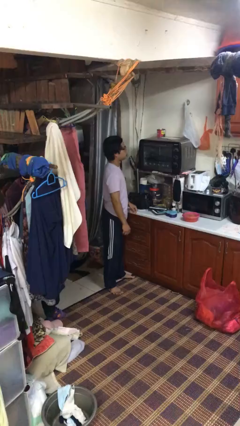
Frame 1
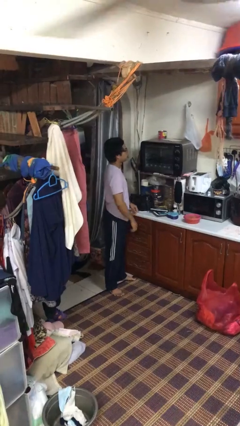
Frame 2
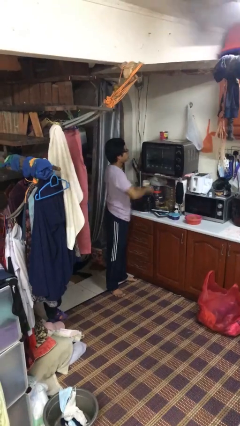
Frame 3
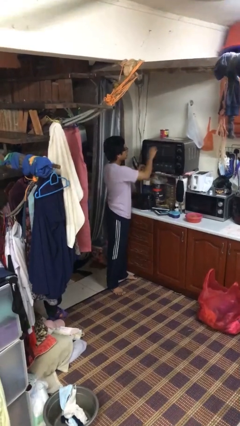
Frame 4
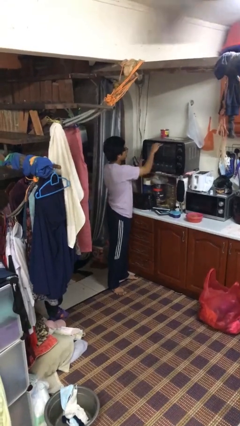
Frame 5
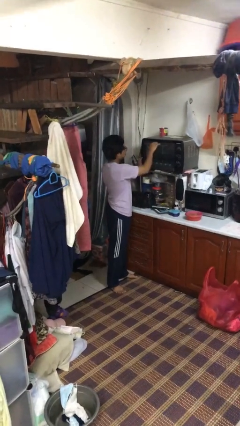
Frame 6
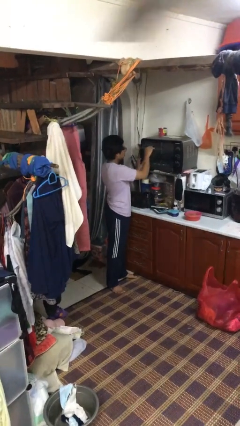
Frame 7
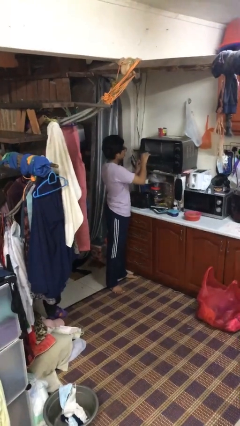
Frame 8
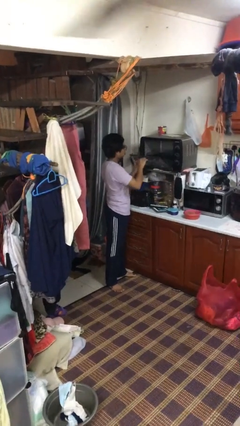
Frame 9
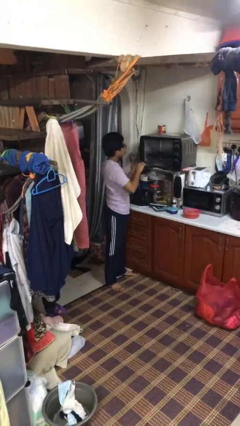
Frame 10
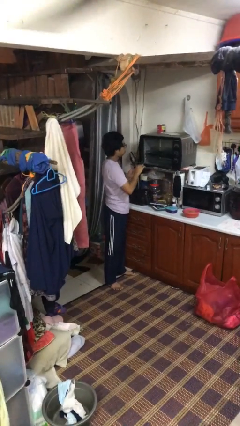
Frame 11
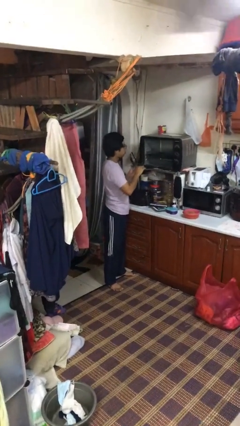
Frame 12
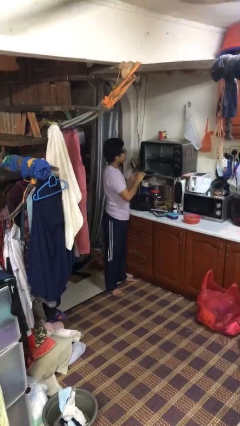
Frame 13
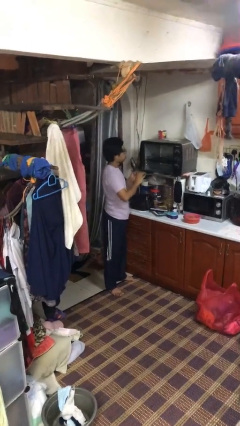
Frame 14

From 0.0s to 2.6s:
person opens oven door

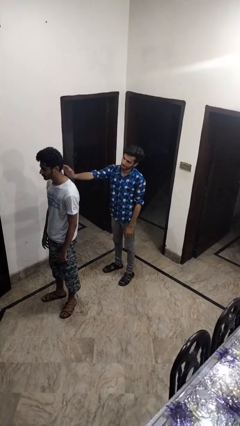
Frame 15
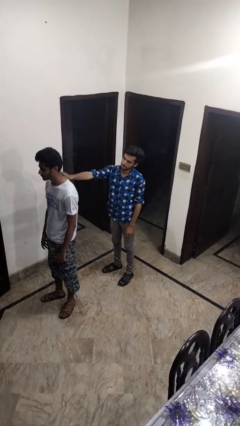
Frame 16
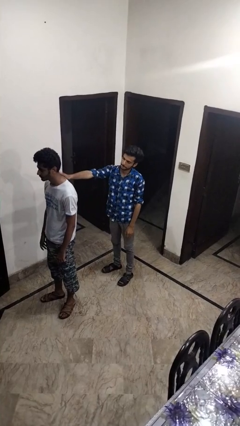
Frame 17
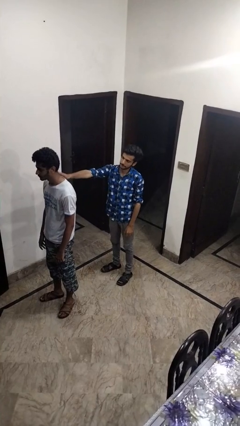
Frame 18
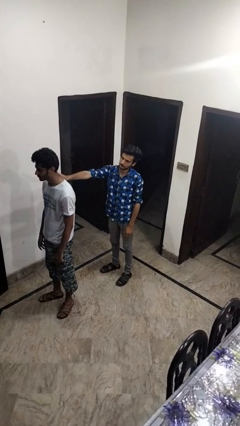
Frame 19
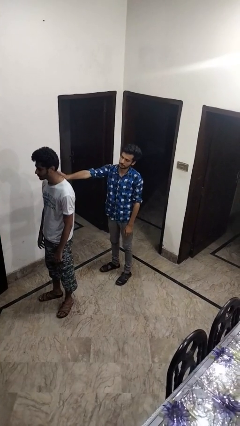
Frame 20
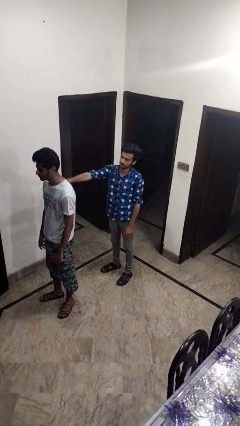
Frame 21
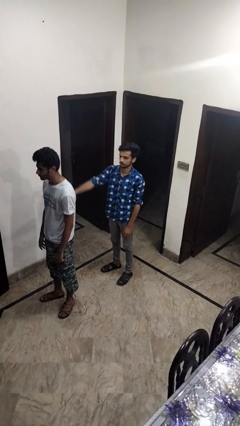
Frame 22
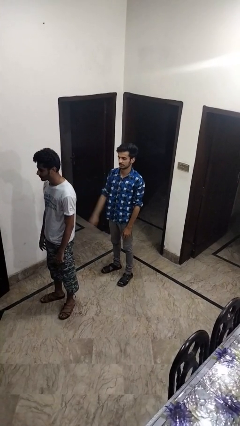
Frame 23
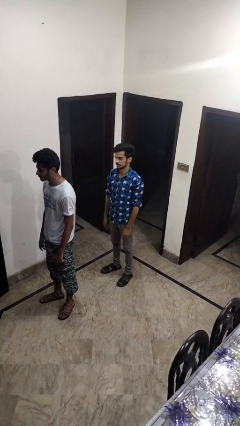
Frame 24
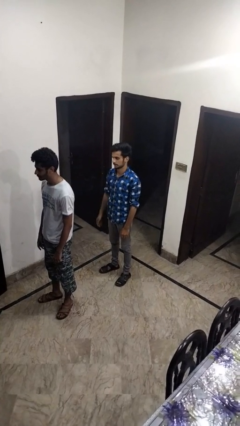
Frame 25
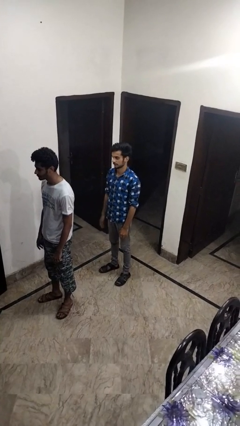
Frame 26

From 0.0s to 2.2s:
person touches back of person

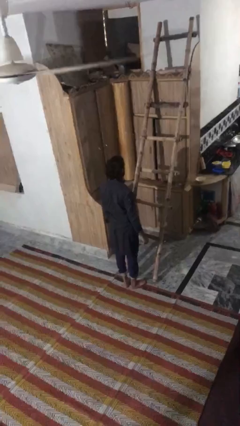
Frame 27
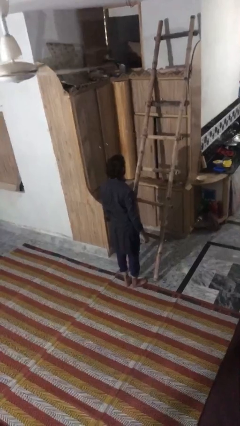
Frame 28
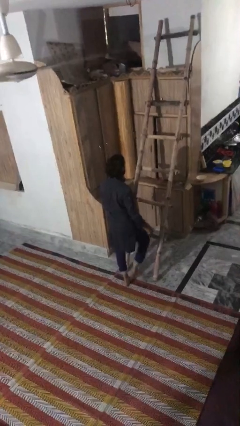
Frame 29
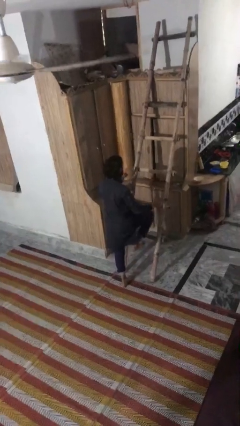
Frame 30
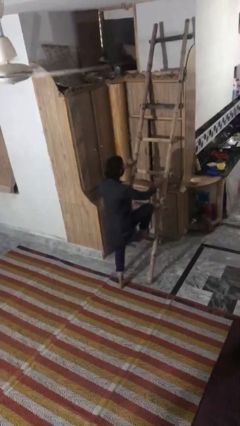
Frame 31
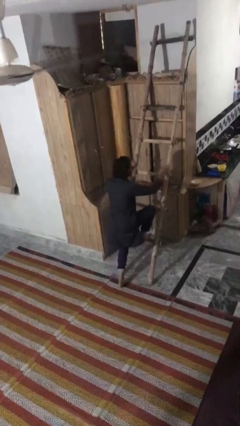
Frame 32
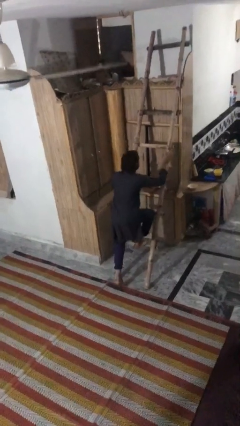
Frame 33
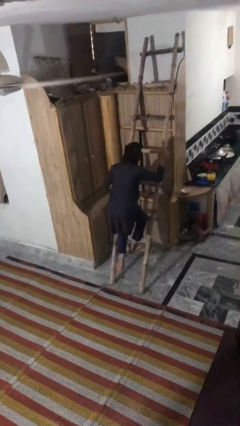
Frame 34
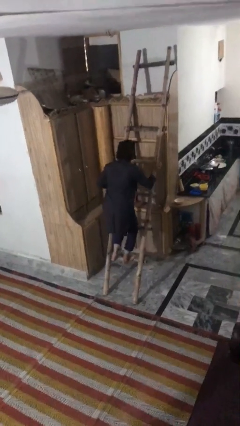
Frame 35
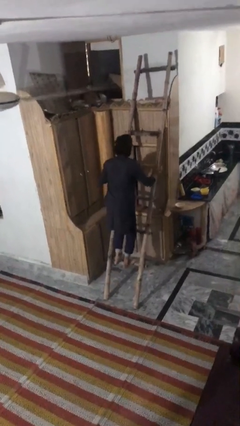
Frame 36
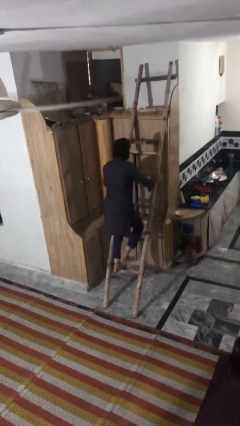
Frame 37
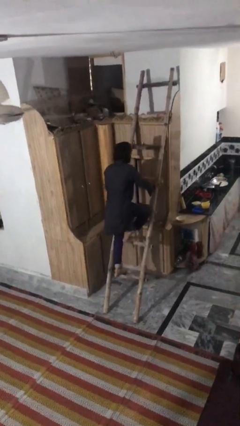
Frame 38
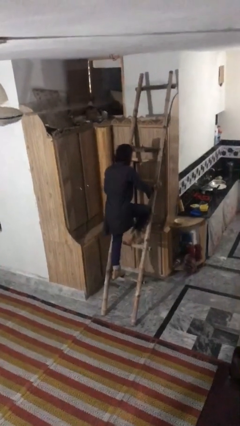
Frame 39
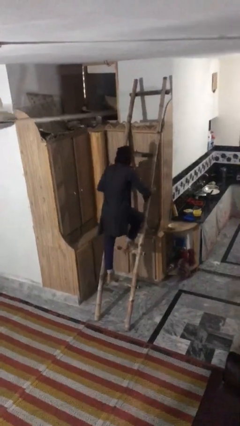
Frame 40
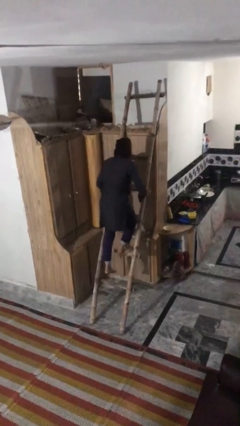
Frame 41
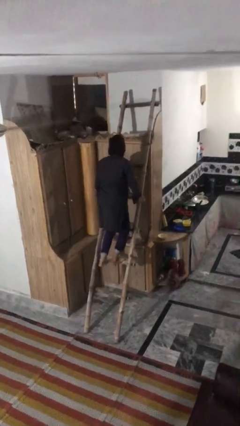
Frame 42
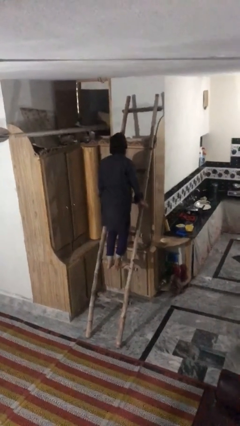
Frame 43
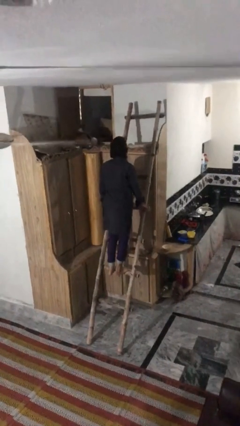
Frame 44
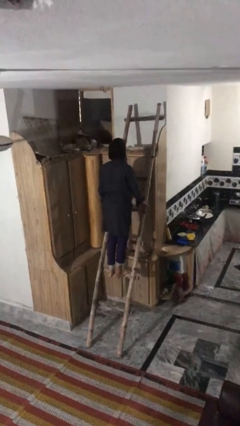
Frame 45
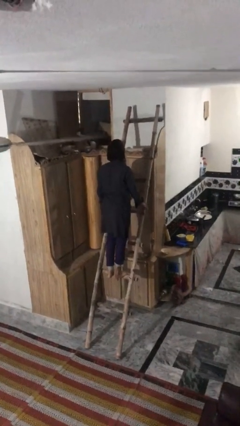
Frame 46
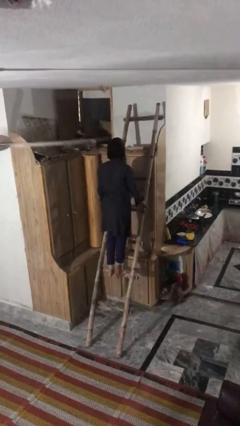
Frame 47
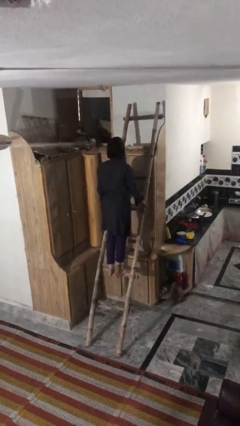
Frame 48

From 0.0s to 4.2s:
person climbs up ladder

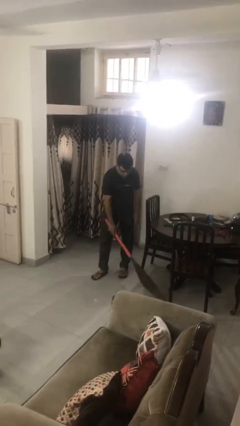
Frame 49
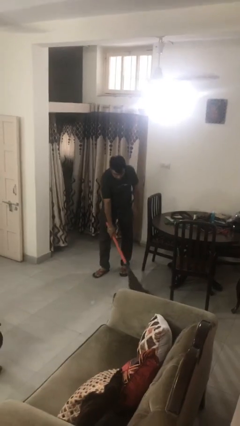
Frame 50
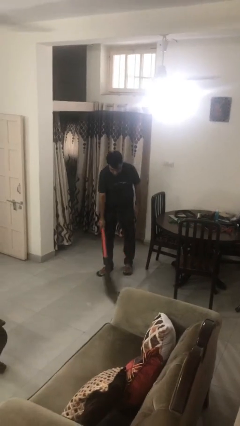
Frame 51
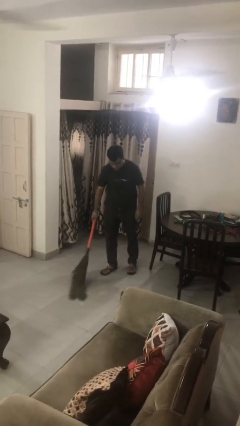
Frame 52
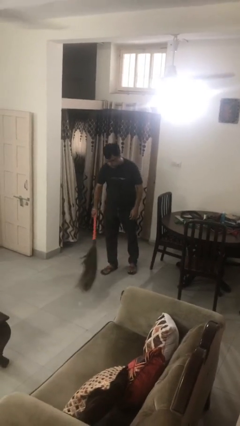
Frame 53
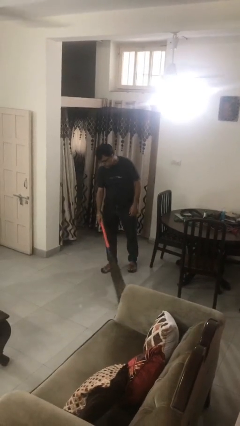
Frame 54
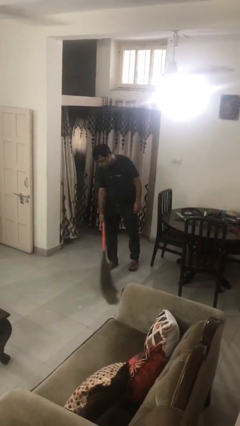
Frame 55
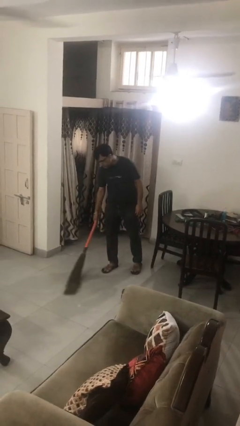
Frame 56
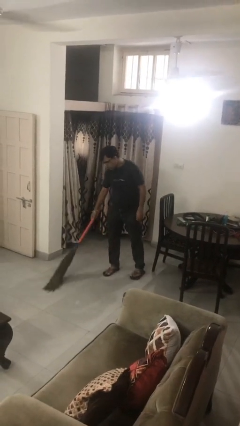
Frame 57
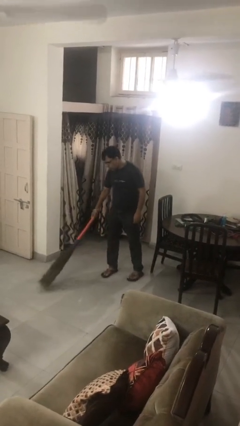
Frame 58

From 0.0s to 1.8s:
person sweeps floor

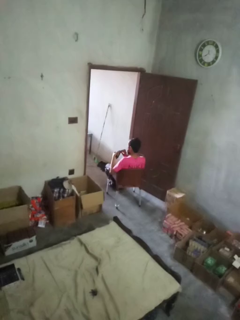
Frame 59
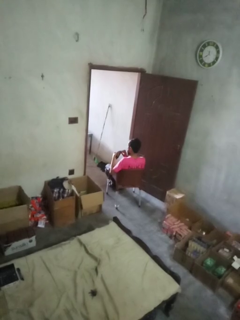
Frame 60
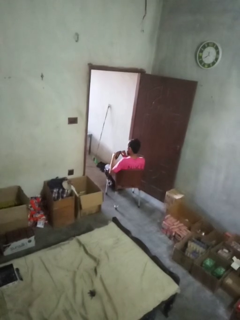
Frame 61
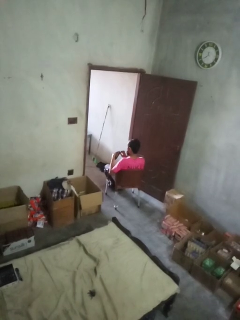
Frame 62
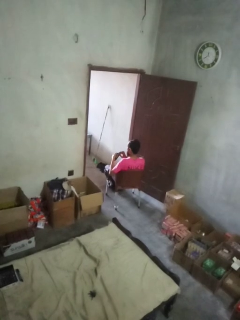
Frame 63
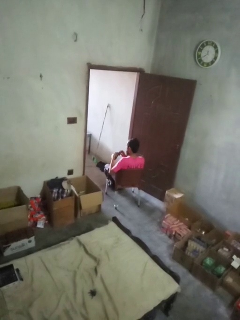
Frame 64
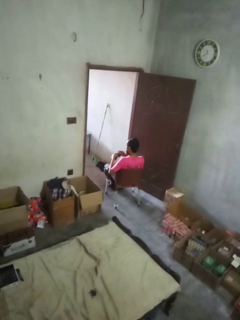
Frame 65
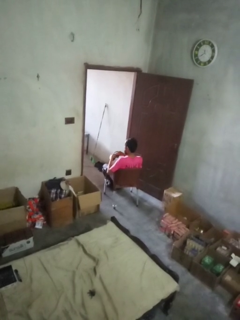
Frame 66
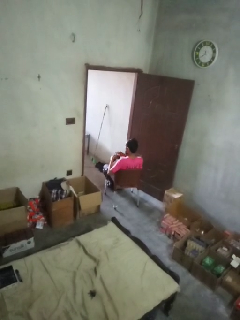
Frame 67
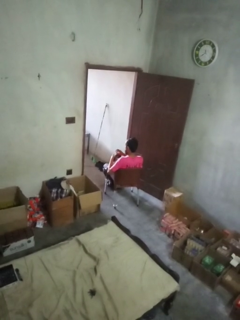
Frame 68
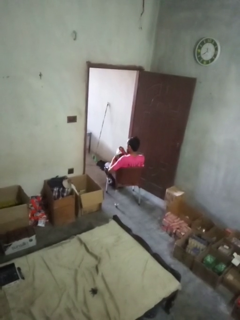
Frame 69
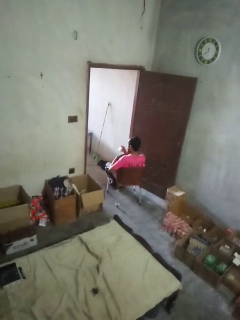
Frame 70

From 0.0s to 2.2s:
person takes object from purse

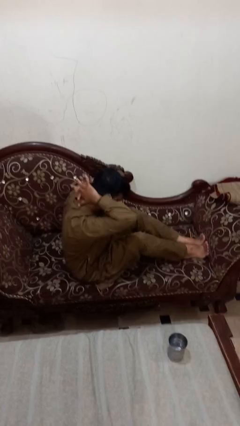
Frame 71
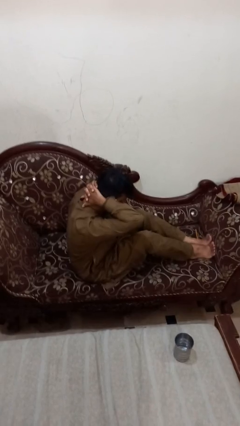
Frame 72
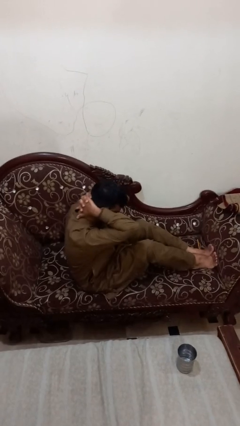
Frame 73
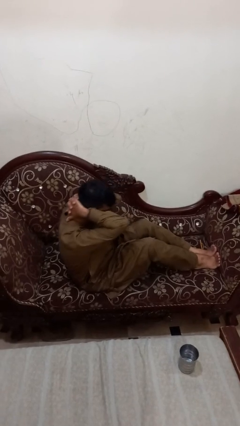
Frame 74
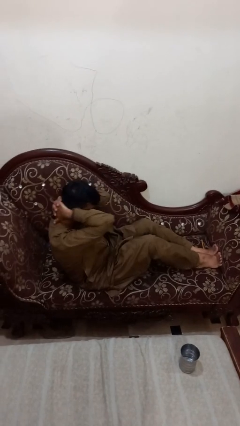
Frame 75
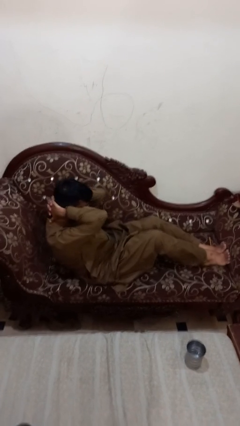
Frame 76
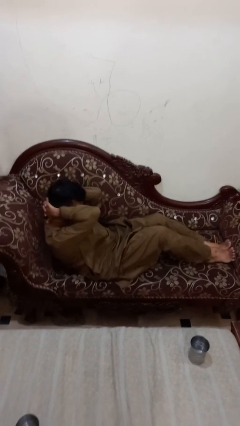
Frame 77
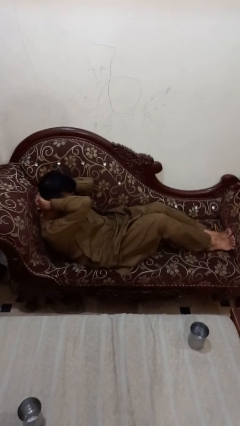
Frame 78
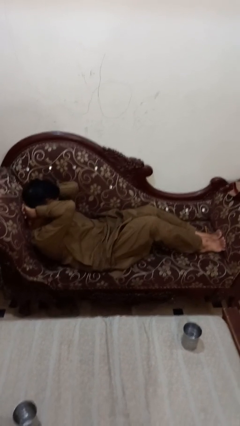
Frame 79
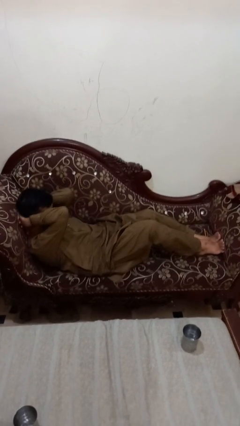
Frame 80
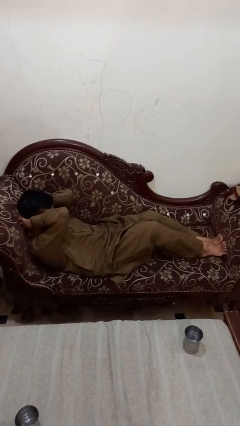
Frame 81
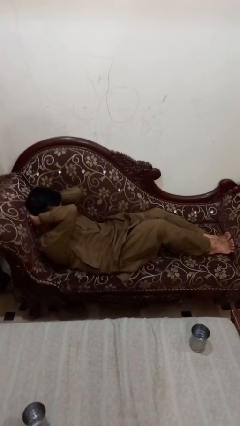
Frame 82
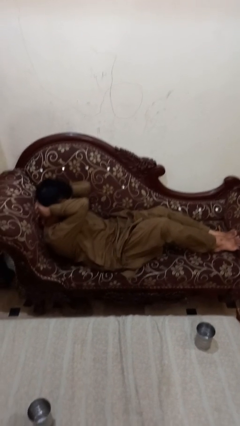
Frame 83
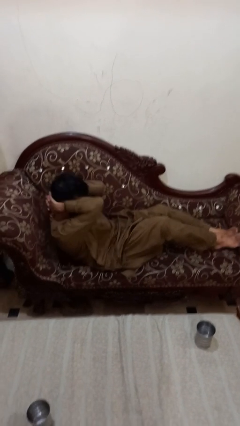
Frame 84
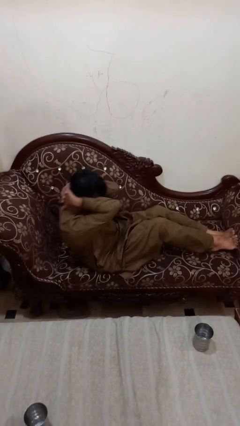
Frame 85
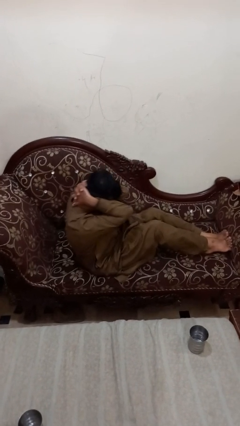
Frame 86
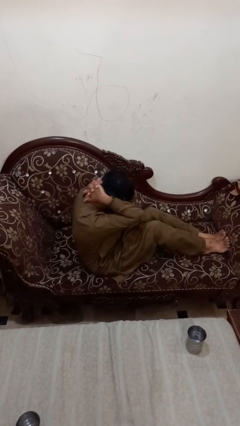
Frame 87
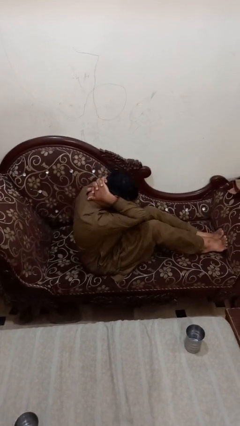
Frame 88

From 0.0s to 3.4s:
person exercises with situp

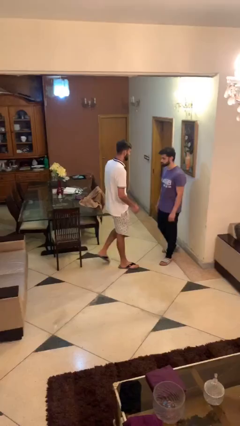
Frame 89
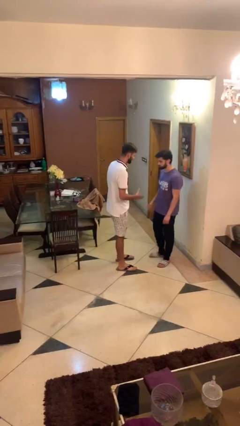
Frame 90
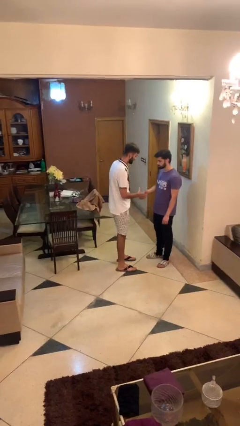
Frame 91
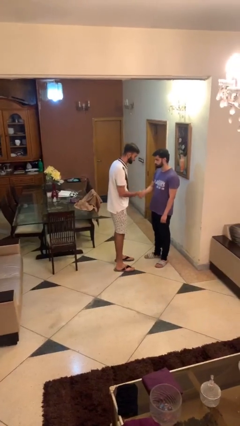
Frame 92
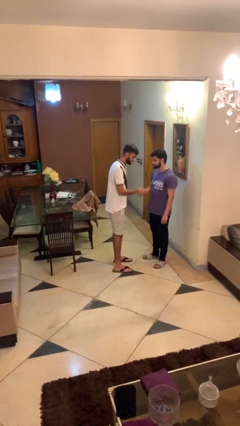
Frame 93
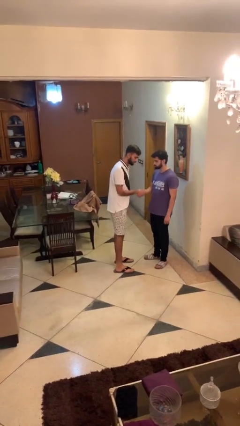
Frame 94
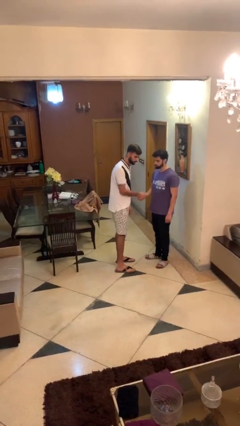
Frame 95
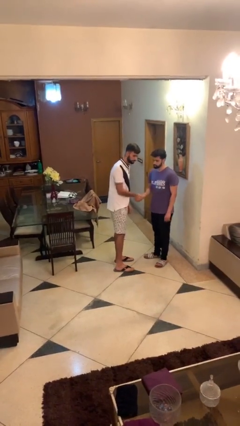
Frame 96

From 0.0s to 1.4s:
person shakes hand

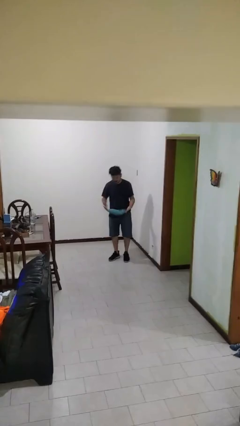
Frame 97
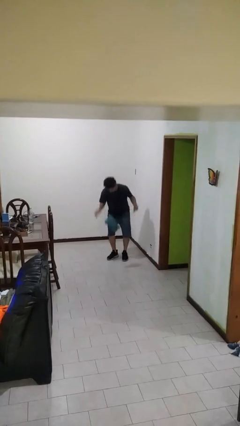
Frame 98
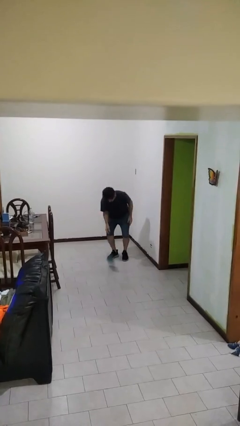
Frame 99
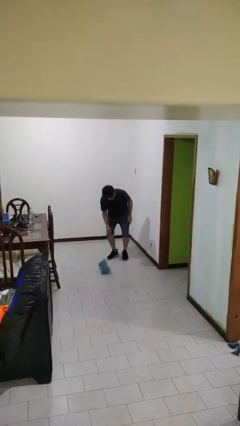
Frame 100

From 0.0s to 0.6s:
person drops object
